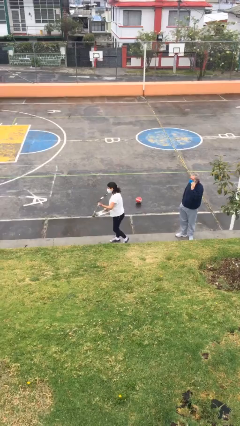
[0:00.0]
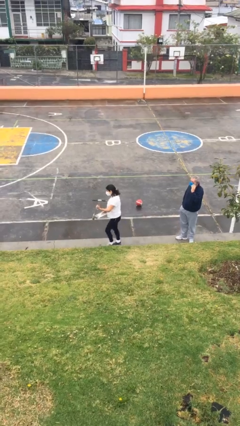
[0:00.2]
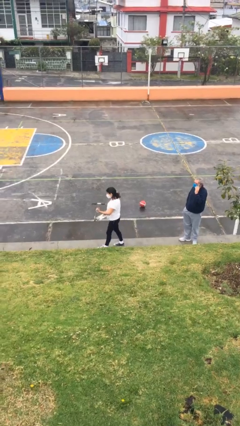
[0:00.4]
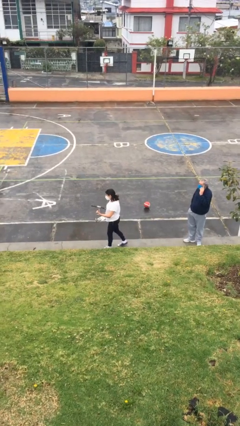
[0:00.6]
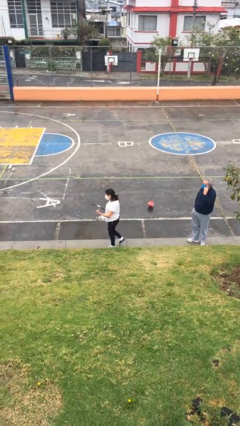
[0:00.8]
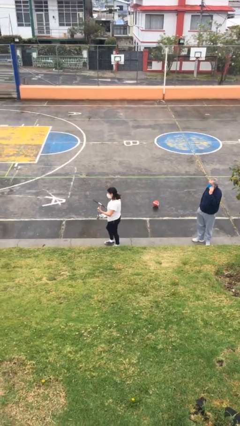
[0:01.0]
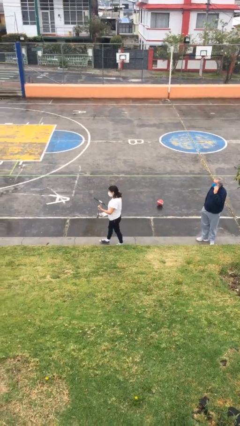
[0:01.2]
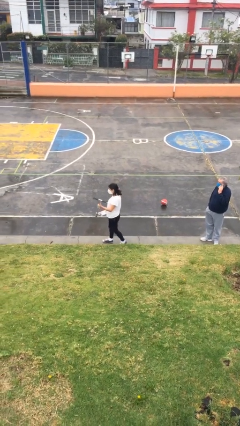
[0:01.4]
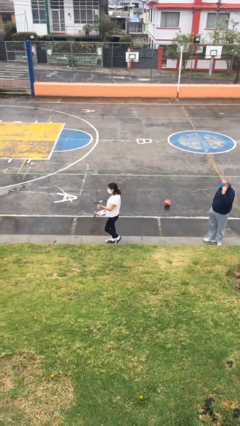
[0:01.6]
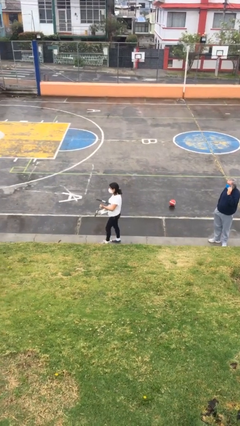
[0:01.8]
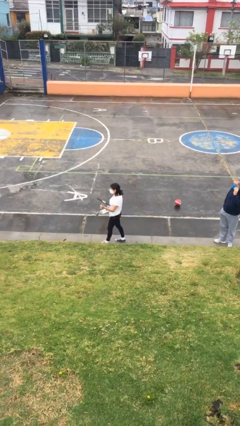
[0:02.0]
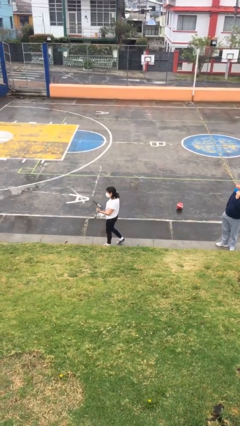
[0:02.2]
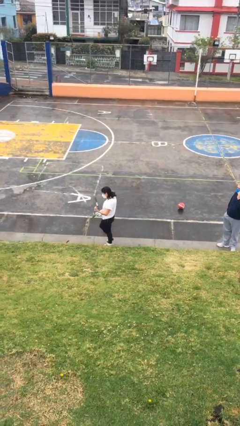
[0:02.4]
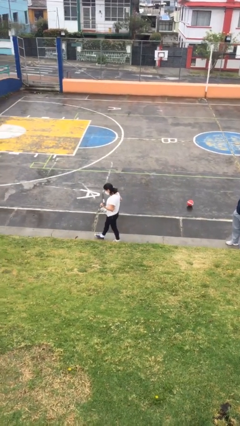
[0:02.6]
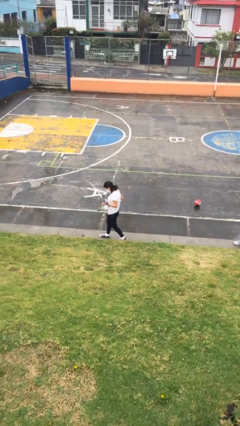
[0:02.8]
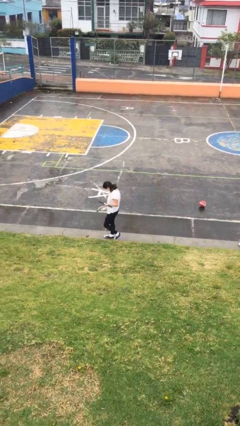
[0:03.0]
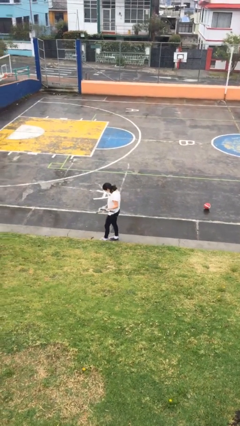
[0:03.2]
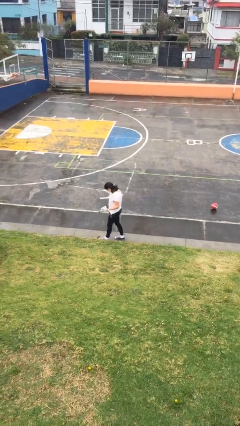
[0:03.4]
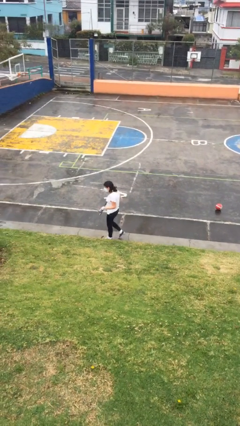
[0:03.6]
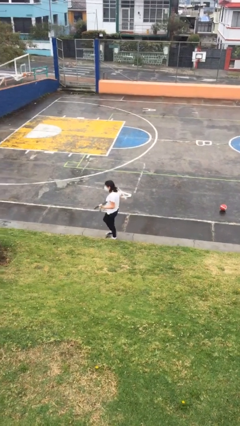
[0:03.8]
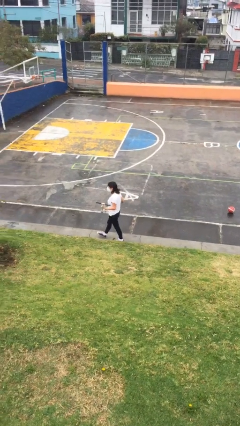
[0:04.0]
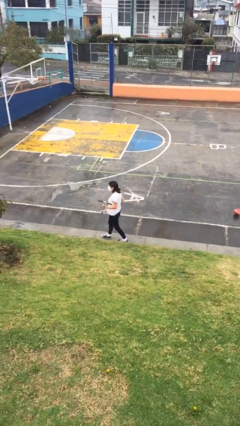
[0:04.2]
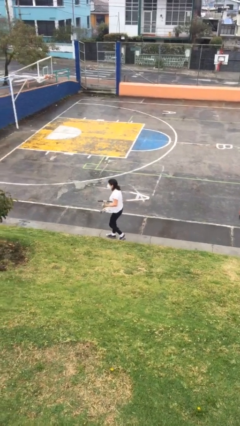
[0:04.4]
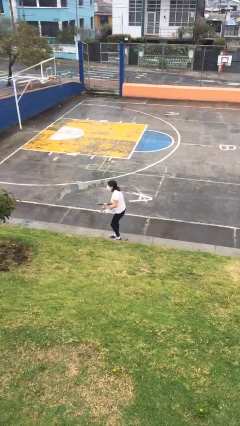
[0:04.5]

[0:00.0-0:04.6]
person carries heavy object

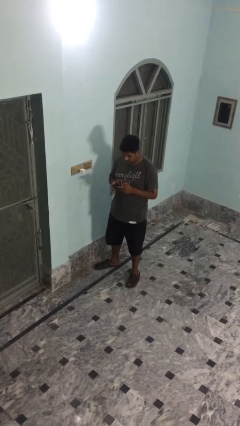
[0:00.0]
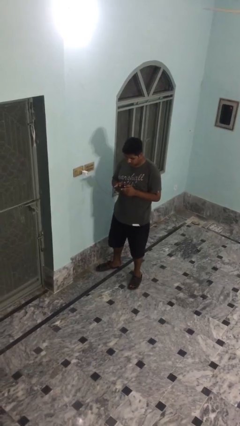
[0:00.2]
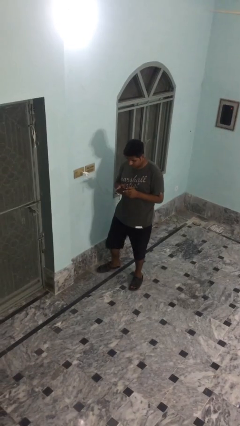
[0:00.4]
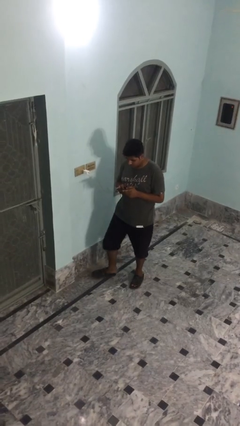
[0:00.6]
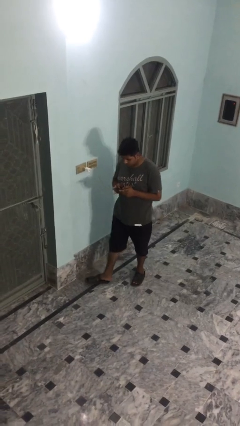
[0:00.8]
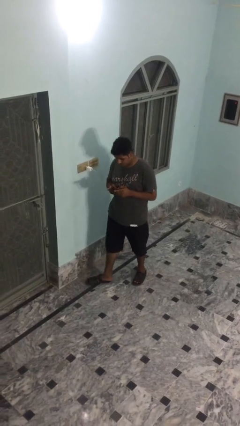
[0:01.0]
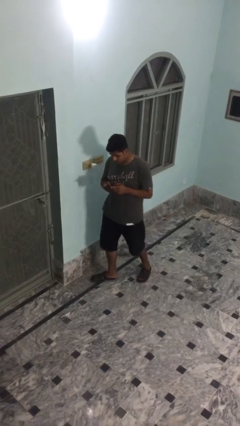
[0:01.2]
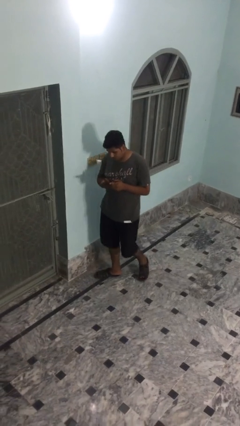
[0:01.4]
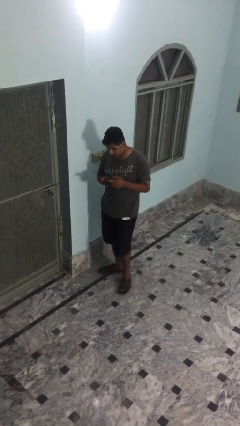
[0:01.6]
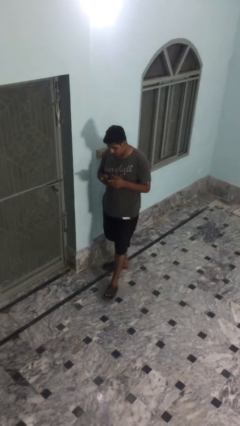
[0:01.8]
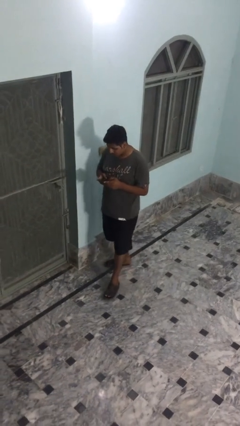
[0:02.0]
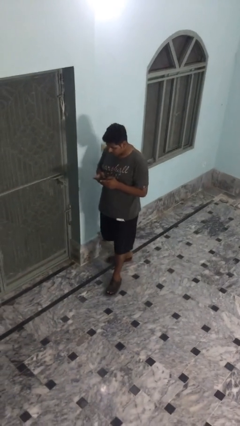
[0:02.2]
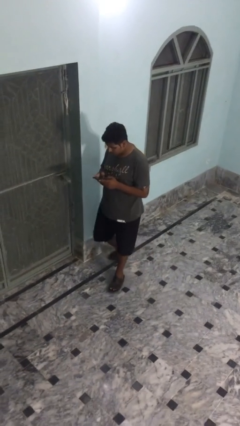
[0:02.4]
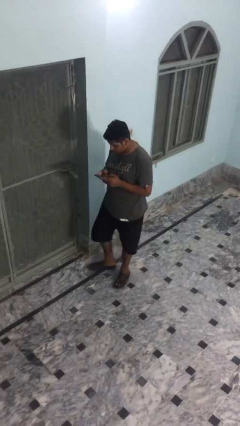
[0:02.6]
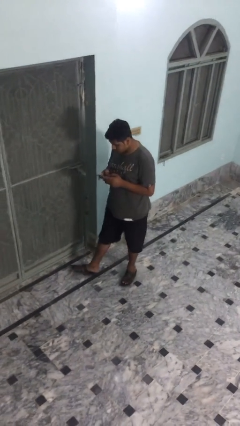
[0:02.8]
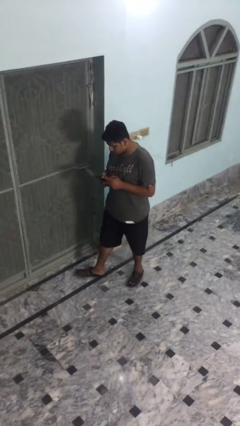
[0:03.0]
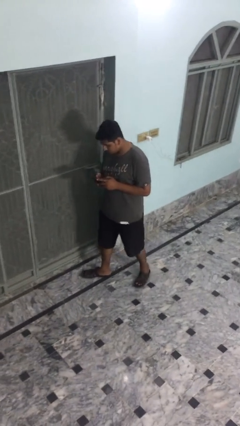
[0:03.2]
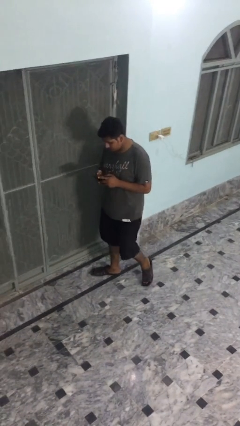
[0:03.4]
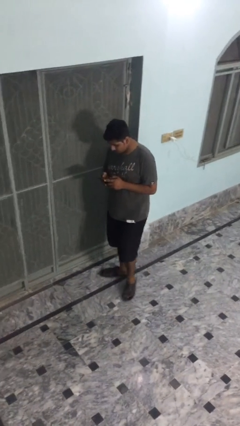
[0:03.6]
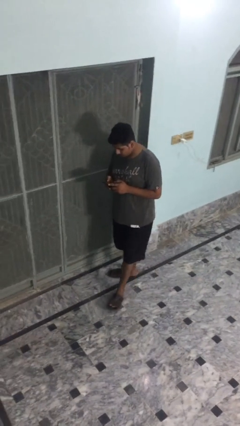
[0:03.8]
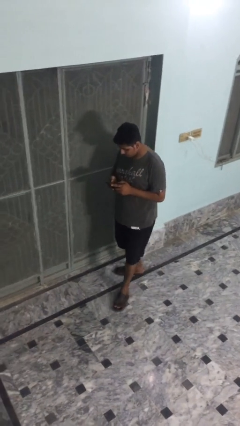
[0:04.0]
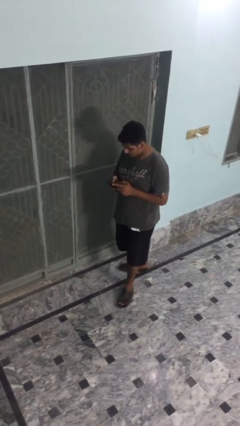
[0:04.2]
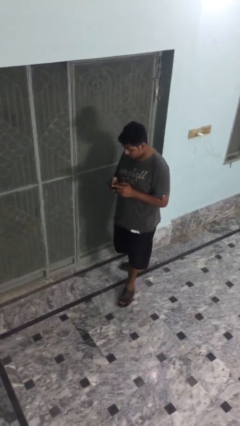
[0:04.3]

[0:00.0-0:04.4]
person texts on phone

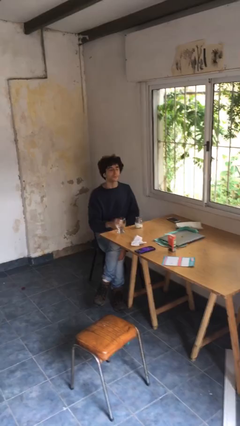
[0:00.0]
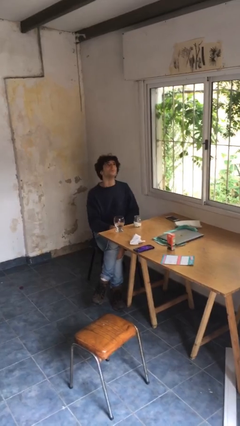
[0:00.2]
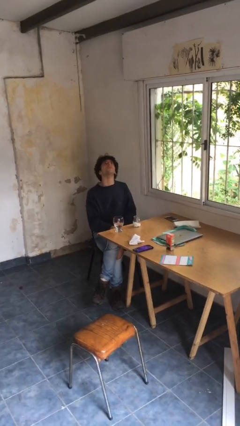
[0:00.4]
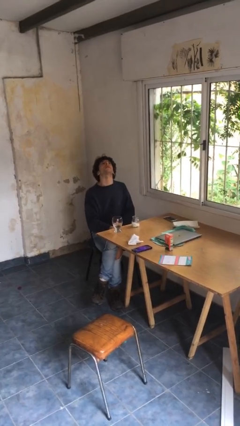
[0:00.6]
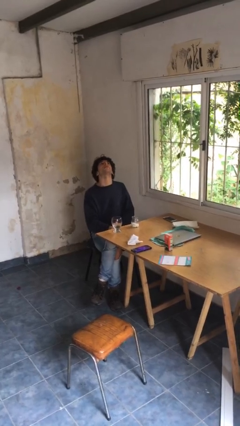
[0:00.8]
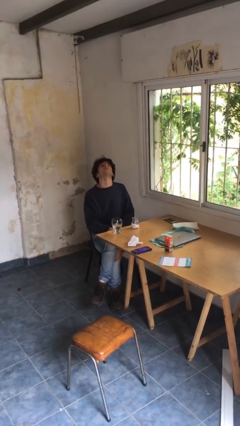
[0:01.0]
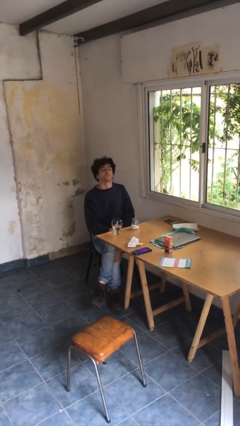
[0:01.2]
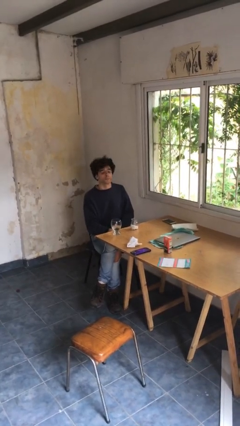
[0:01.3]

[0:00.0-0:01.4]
person takes medicine pills

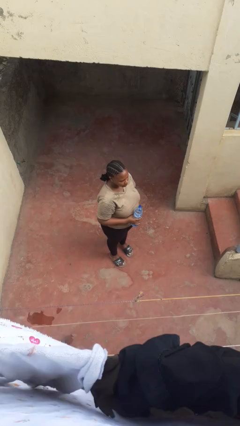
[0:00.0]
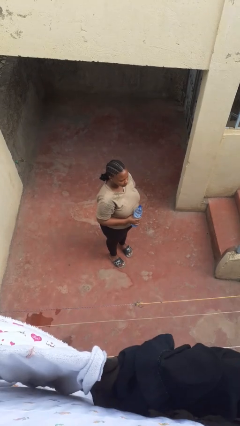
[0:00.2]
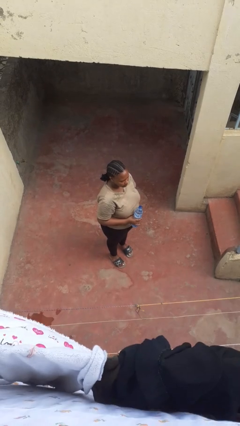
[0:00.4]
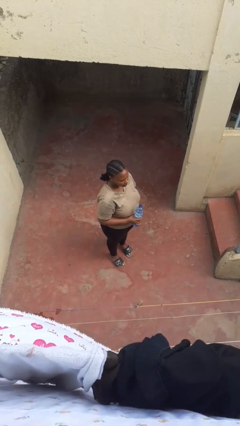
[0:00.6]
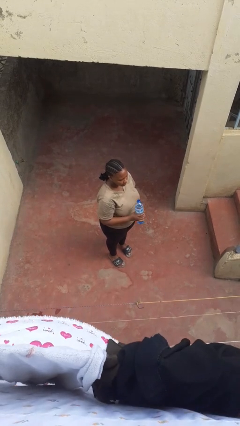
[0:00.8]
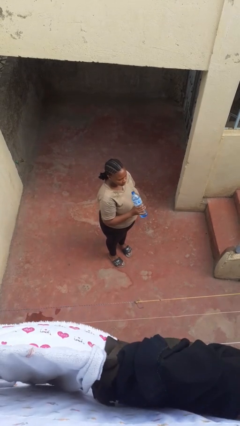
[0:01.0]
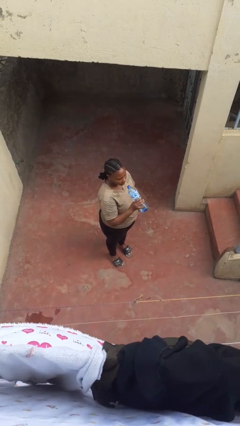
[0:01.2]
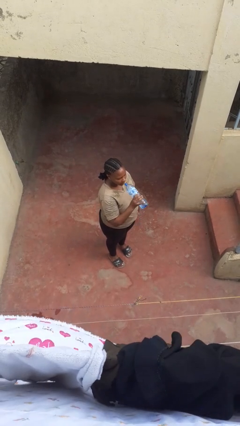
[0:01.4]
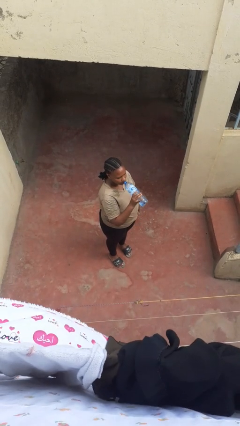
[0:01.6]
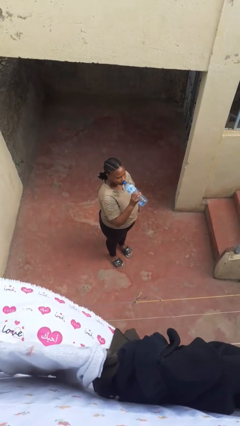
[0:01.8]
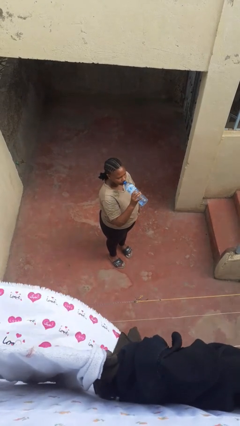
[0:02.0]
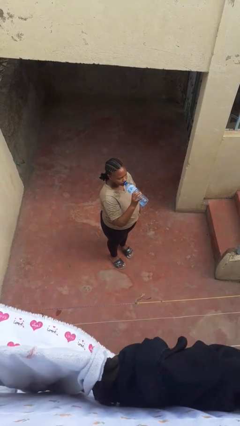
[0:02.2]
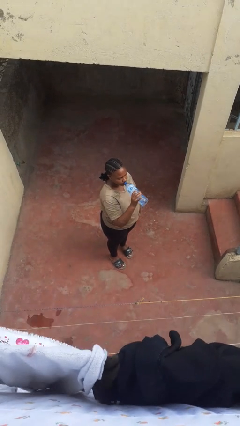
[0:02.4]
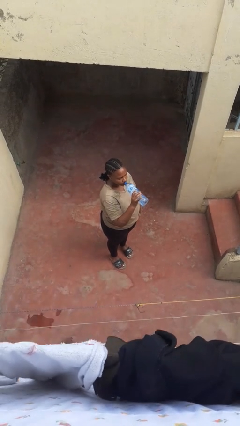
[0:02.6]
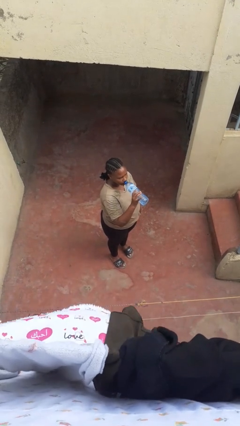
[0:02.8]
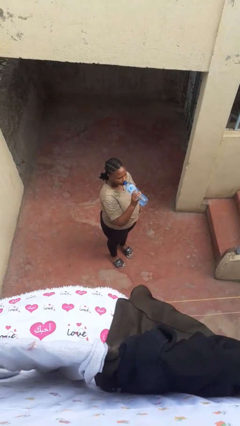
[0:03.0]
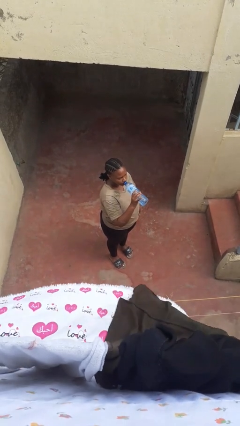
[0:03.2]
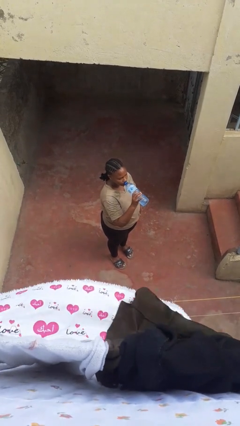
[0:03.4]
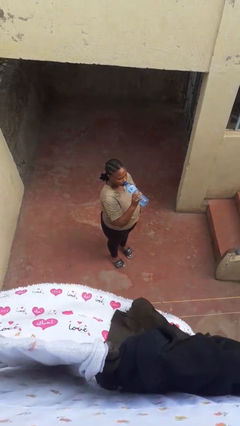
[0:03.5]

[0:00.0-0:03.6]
person drinks from bottle

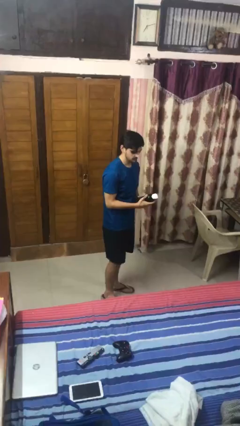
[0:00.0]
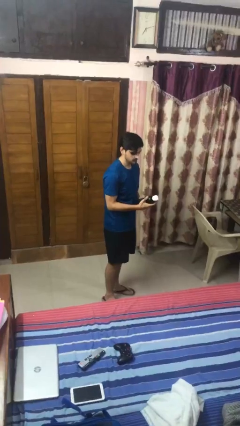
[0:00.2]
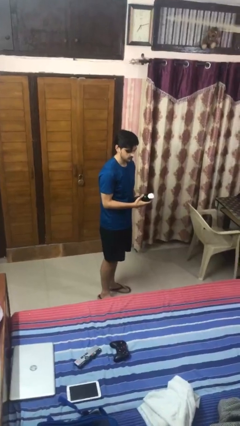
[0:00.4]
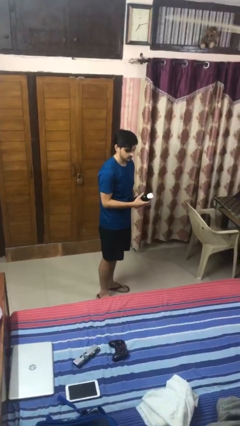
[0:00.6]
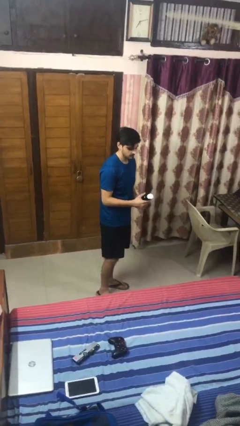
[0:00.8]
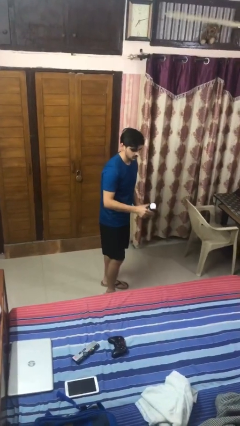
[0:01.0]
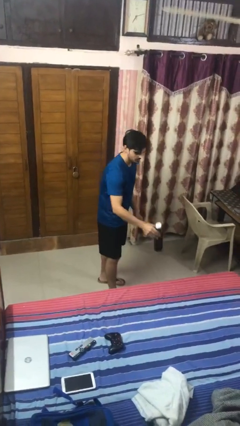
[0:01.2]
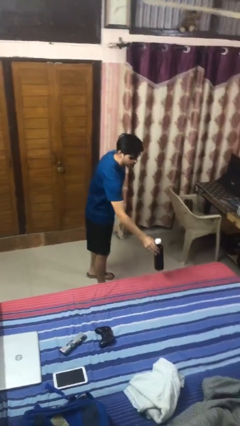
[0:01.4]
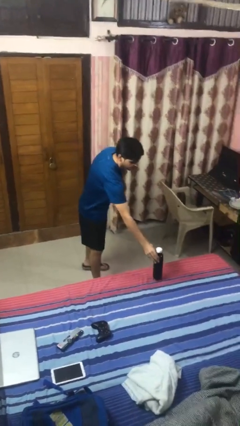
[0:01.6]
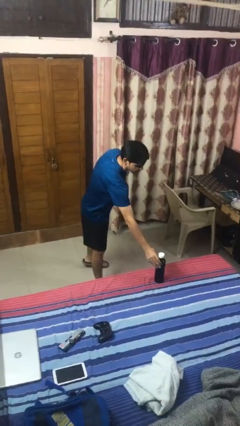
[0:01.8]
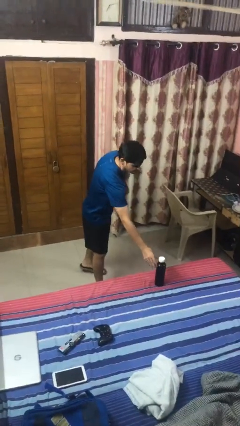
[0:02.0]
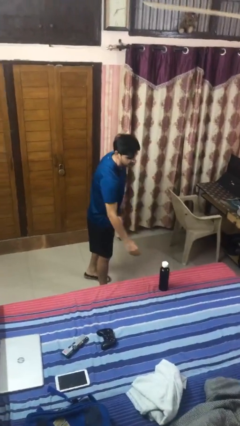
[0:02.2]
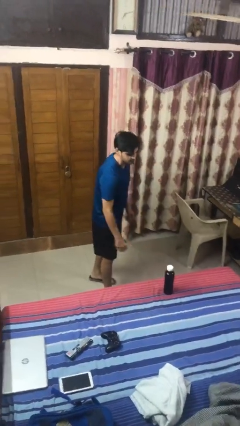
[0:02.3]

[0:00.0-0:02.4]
person puts down object on bed

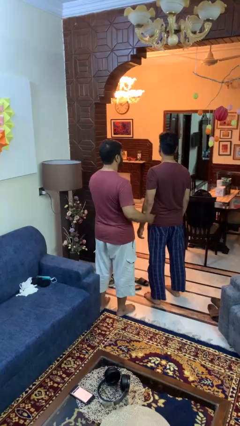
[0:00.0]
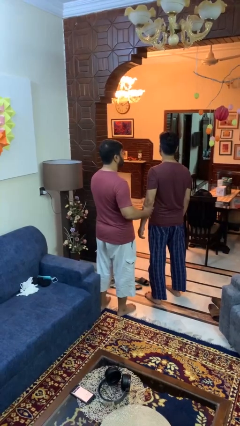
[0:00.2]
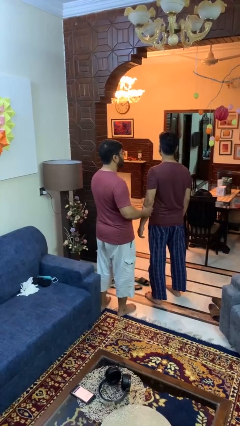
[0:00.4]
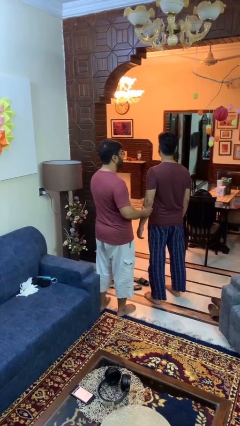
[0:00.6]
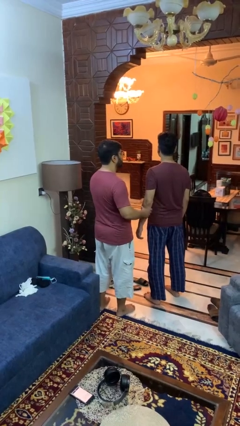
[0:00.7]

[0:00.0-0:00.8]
person grabs person by forearm

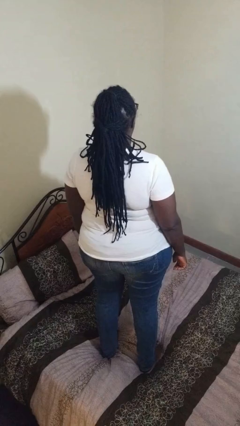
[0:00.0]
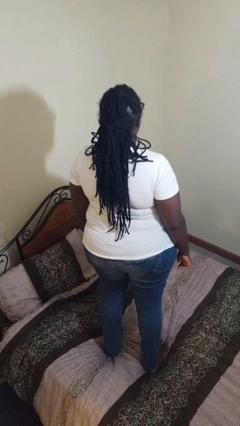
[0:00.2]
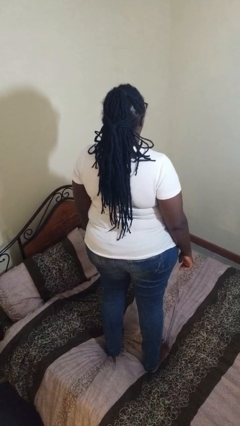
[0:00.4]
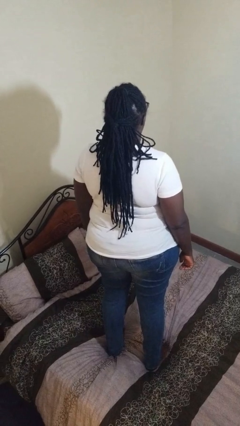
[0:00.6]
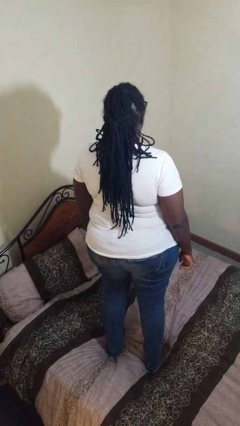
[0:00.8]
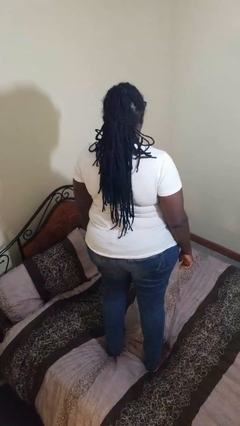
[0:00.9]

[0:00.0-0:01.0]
person jumps on bed
